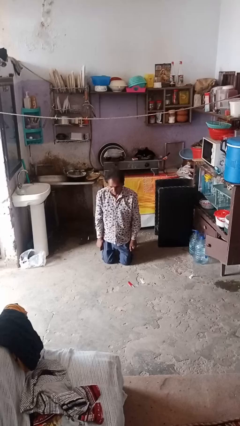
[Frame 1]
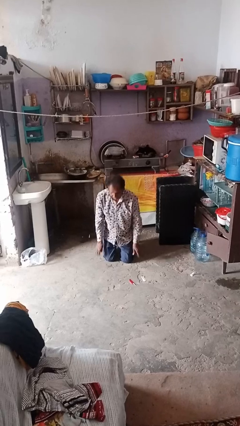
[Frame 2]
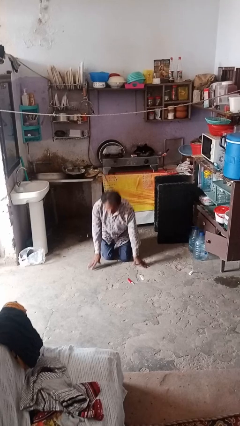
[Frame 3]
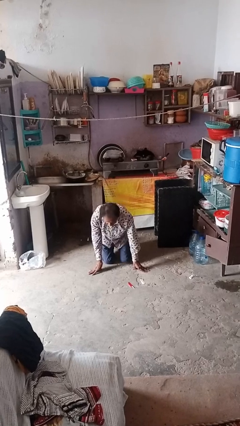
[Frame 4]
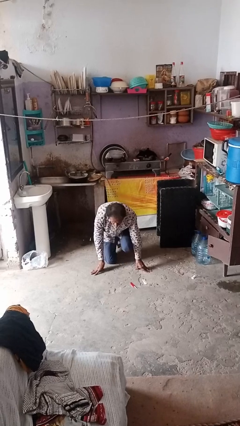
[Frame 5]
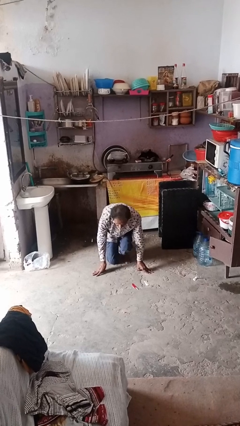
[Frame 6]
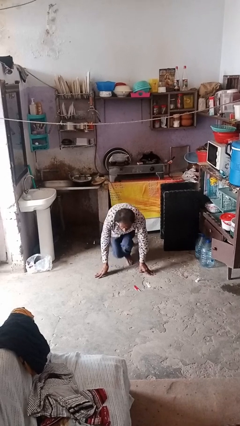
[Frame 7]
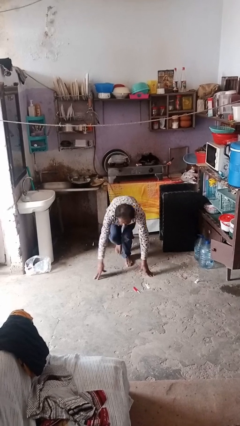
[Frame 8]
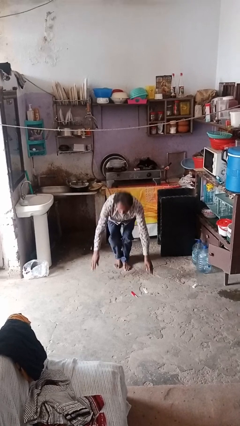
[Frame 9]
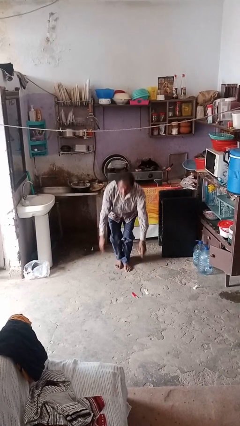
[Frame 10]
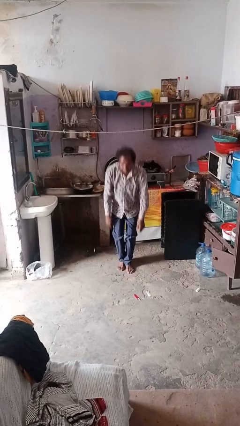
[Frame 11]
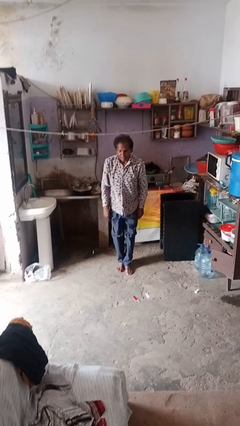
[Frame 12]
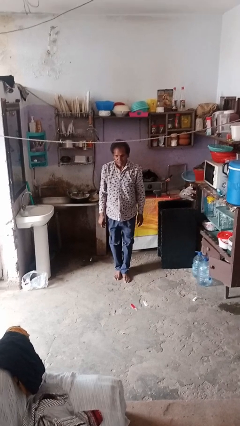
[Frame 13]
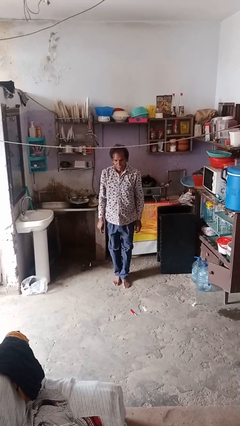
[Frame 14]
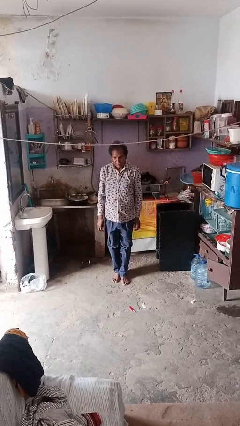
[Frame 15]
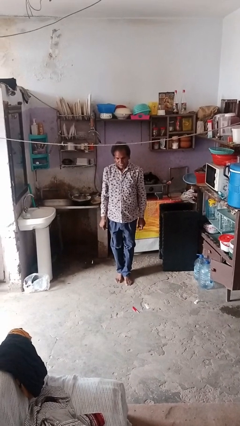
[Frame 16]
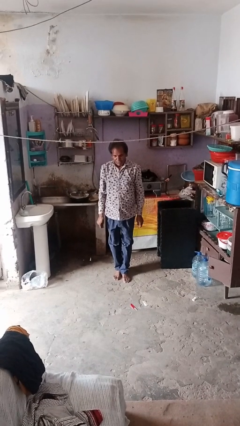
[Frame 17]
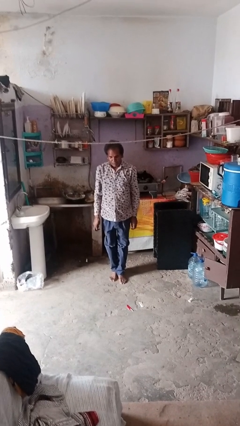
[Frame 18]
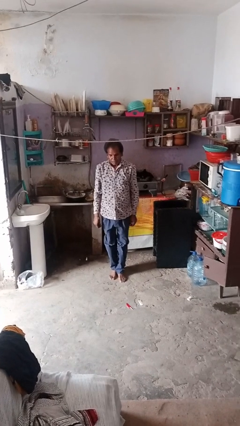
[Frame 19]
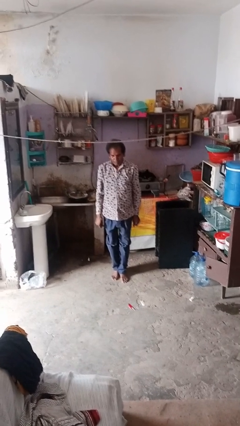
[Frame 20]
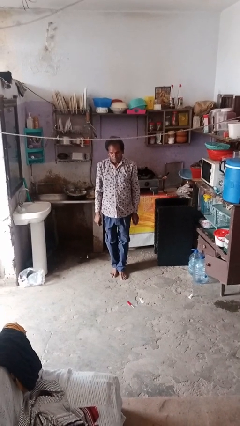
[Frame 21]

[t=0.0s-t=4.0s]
person stands up from floor

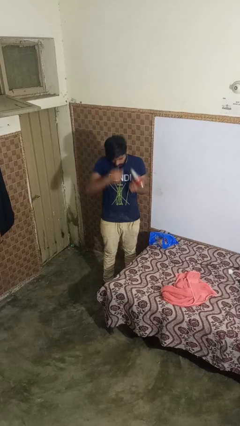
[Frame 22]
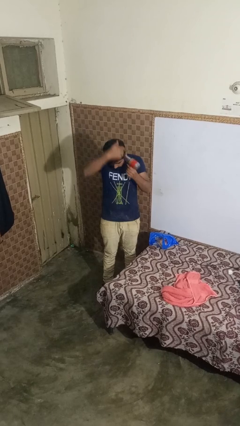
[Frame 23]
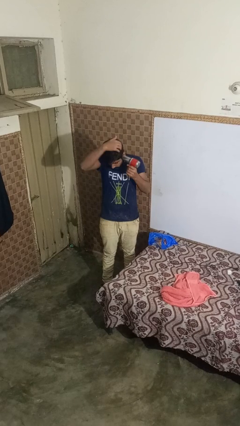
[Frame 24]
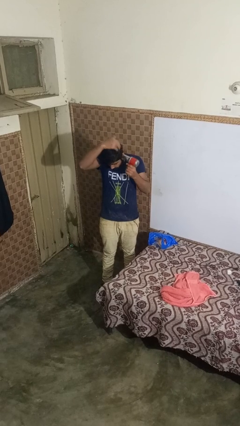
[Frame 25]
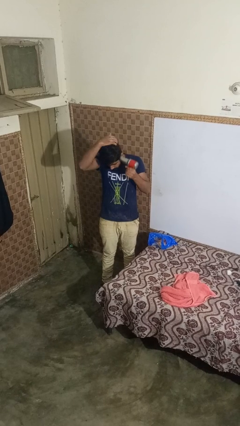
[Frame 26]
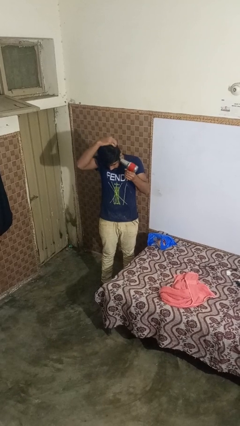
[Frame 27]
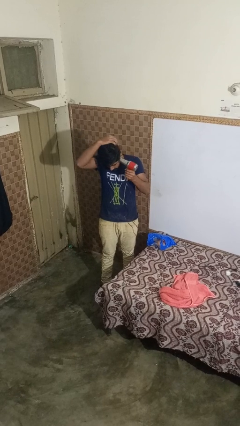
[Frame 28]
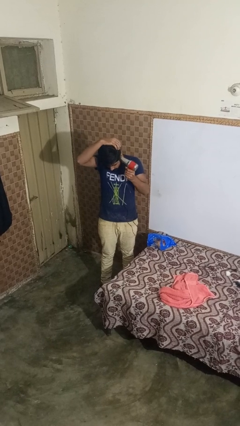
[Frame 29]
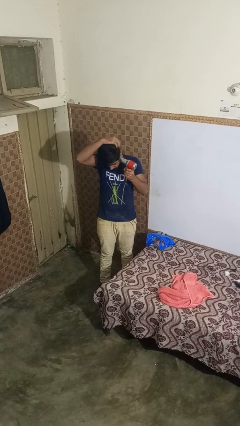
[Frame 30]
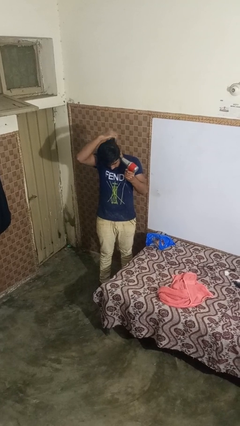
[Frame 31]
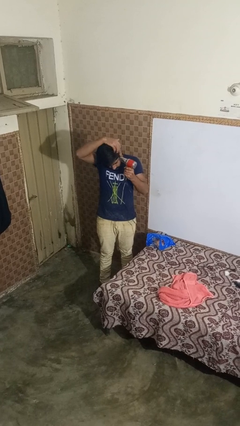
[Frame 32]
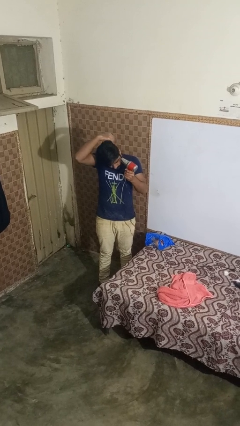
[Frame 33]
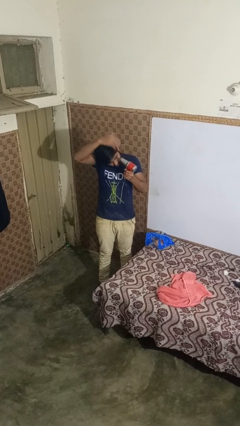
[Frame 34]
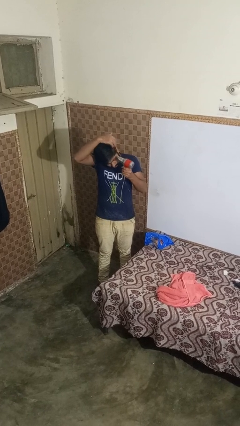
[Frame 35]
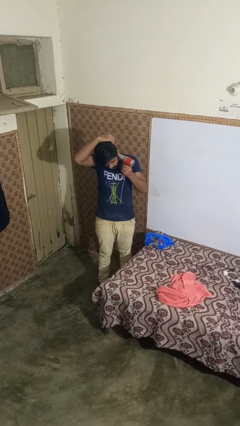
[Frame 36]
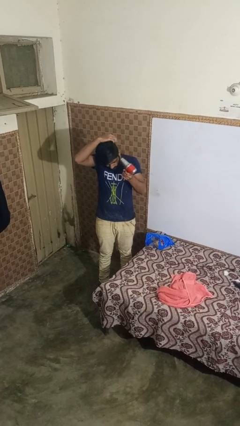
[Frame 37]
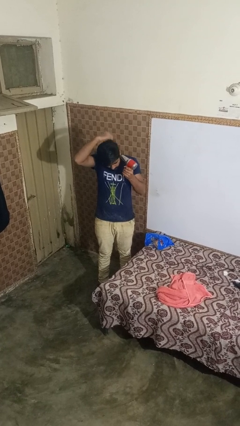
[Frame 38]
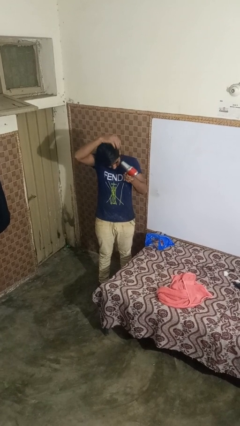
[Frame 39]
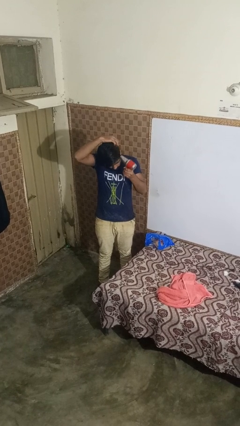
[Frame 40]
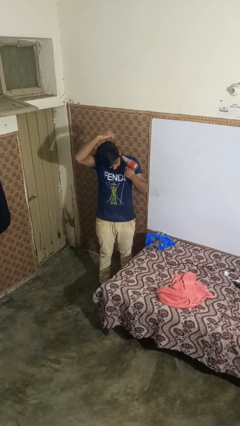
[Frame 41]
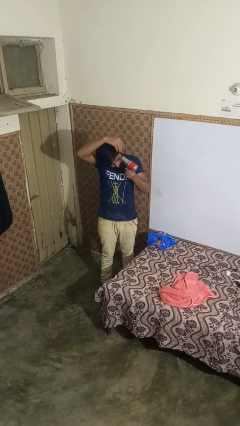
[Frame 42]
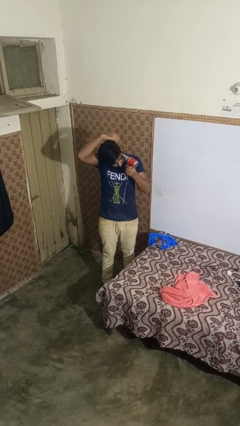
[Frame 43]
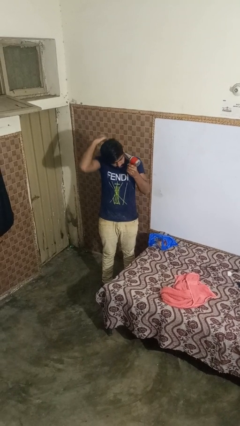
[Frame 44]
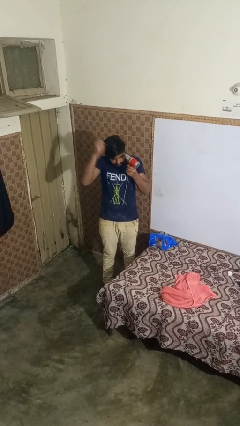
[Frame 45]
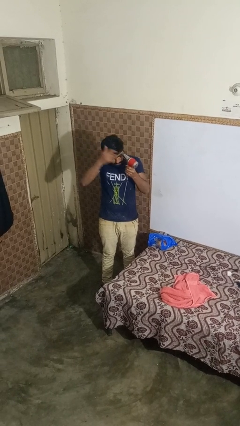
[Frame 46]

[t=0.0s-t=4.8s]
person dries hair with hairdryer

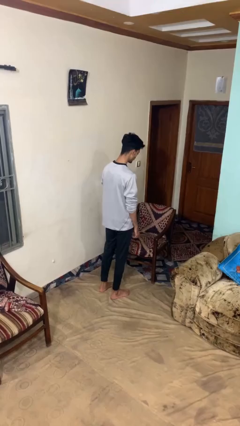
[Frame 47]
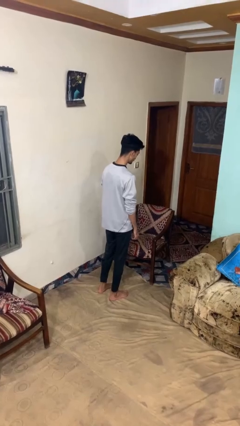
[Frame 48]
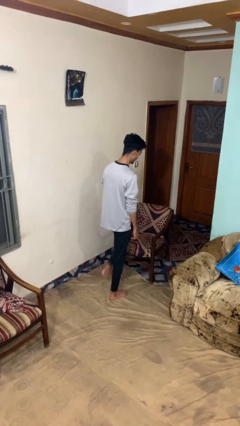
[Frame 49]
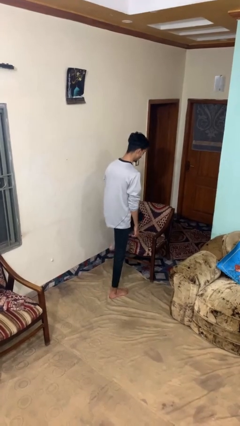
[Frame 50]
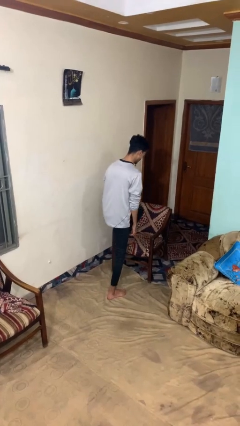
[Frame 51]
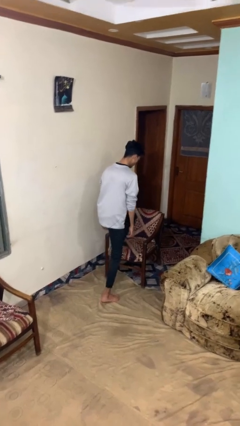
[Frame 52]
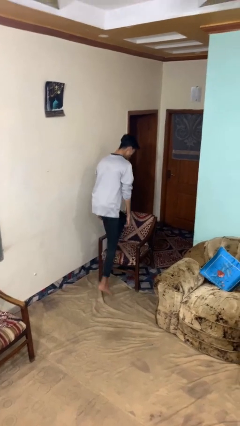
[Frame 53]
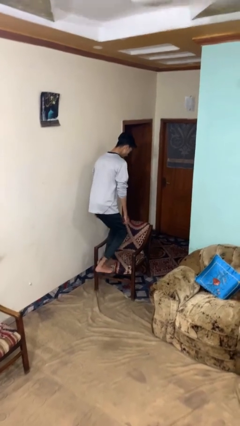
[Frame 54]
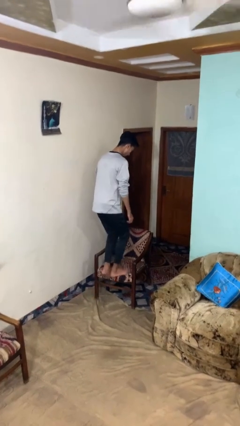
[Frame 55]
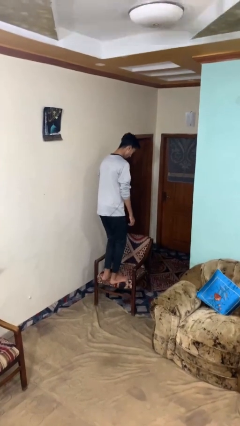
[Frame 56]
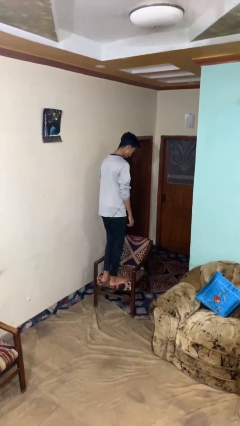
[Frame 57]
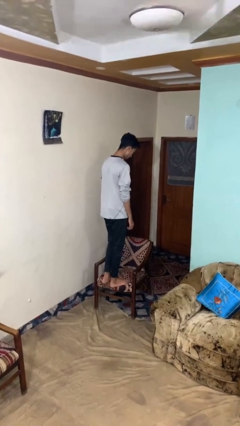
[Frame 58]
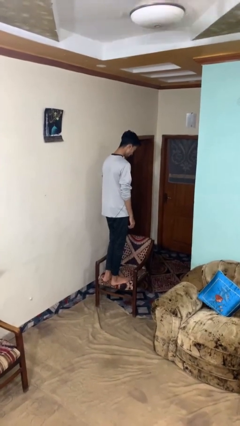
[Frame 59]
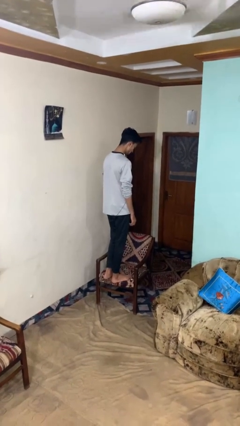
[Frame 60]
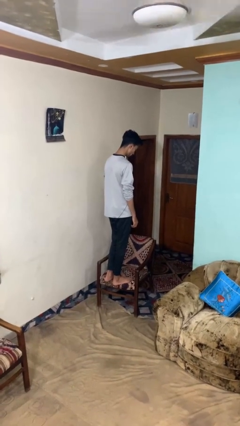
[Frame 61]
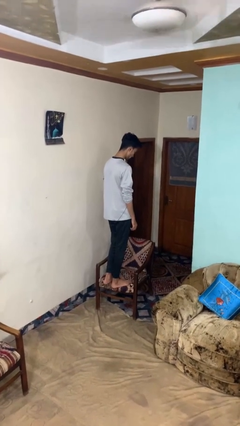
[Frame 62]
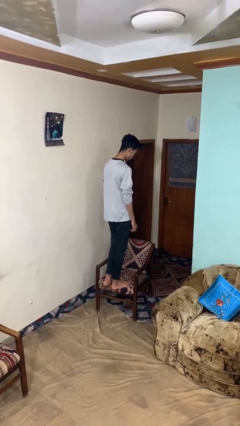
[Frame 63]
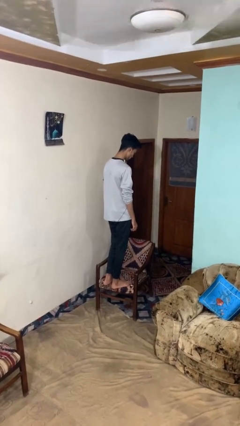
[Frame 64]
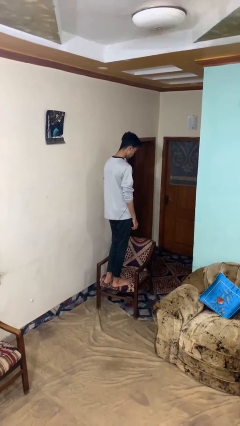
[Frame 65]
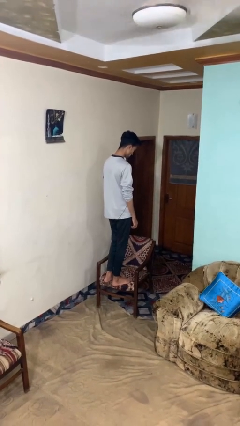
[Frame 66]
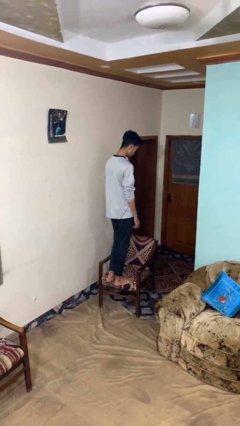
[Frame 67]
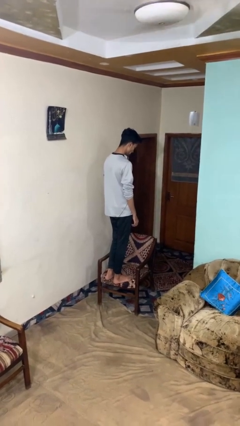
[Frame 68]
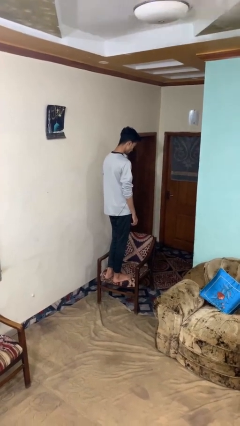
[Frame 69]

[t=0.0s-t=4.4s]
person climbs on chair

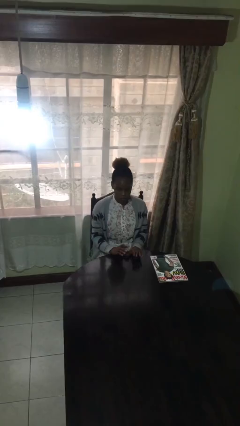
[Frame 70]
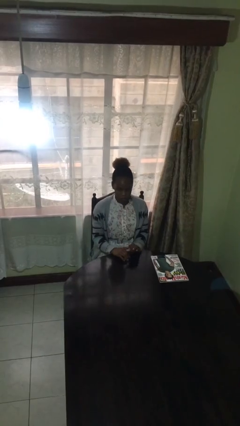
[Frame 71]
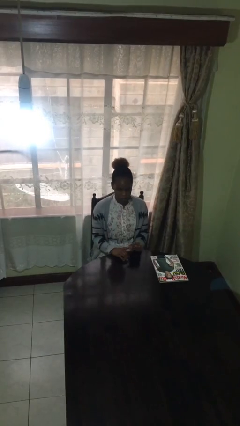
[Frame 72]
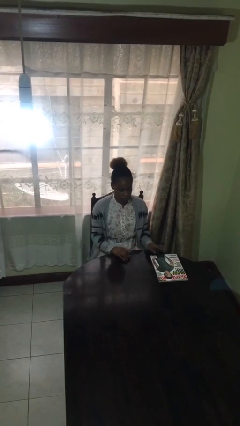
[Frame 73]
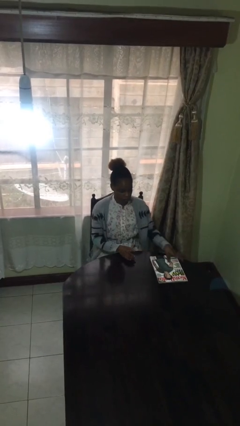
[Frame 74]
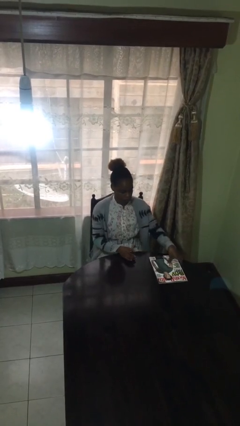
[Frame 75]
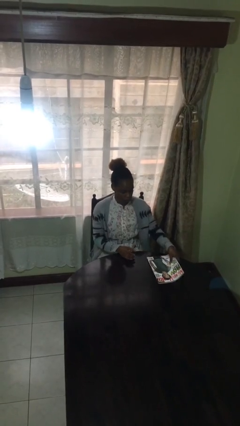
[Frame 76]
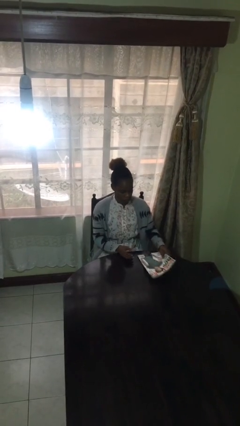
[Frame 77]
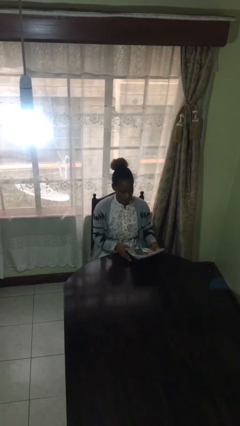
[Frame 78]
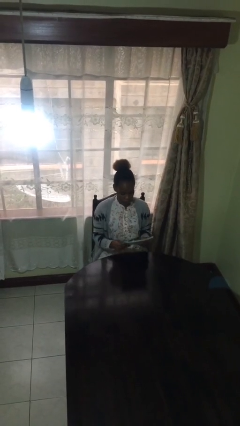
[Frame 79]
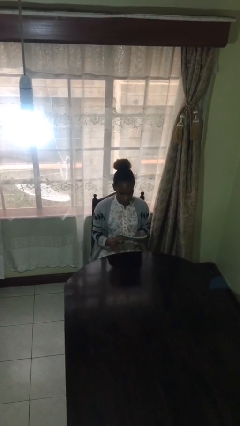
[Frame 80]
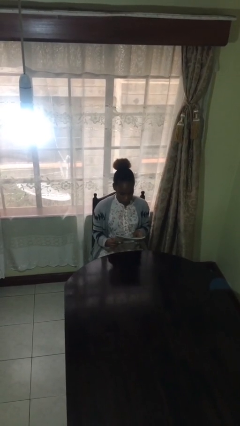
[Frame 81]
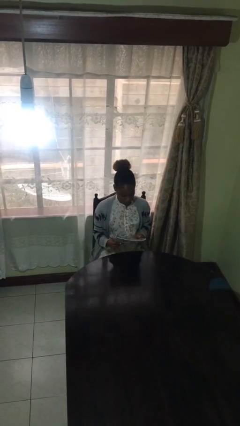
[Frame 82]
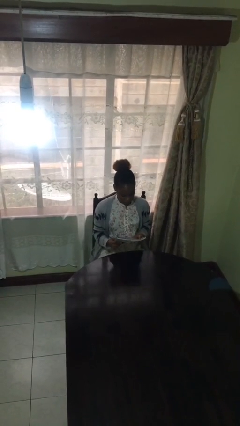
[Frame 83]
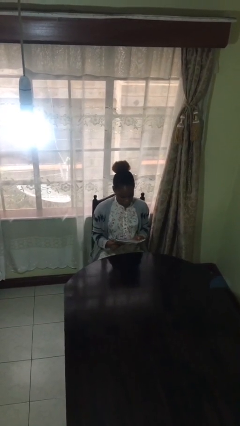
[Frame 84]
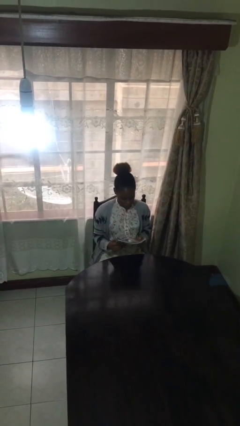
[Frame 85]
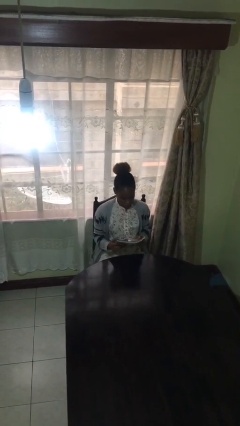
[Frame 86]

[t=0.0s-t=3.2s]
person picks up object from table

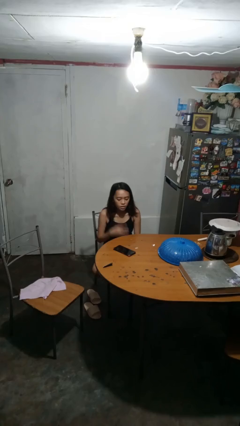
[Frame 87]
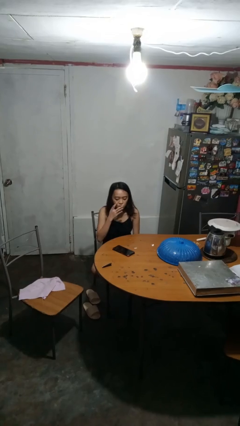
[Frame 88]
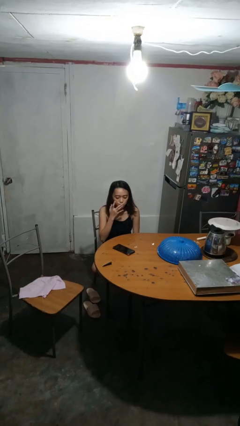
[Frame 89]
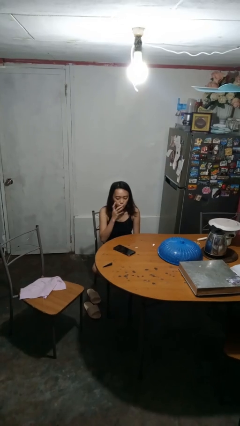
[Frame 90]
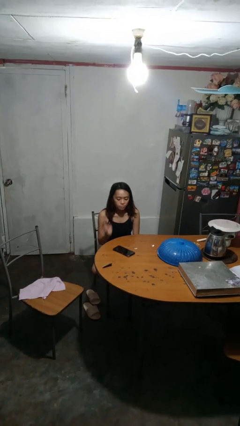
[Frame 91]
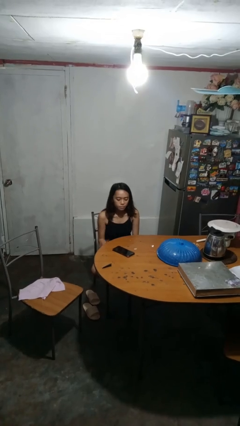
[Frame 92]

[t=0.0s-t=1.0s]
person licks fingers
